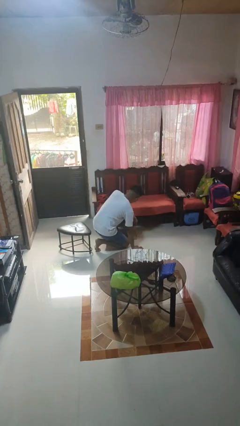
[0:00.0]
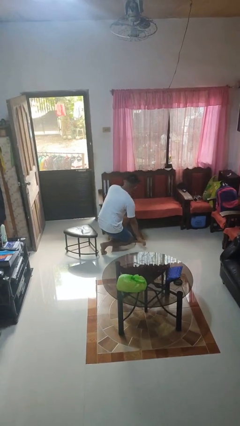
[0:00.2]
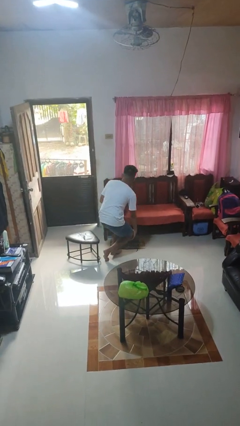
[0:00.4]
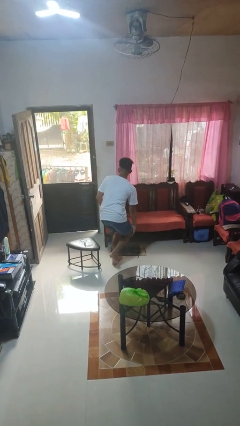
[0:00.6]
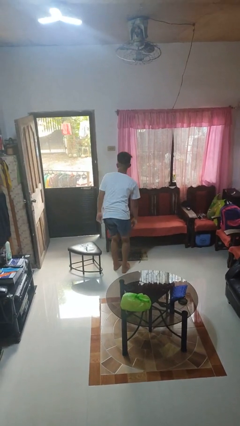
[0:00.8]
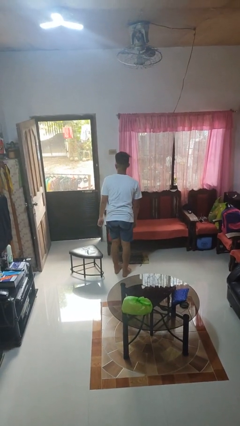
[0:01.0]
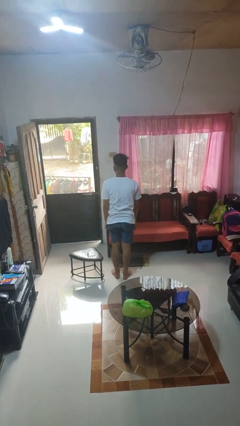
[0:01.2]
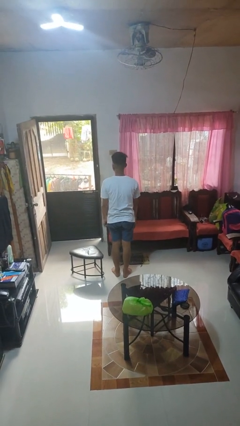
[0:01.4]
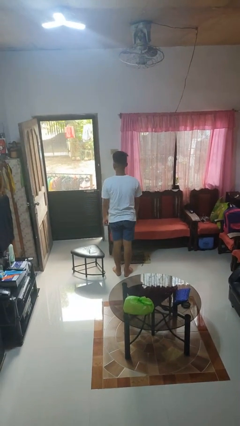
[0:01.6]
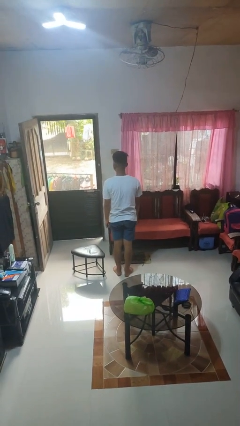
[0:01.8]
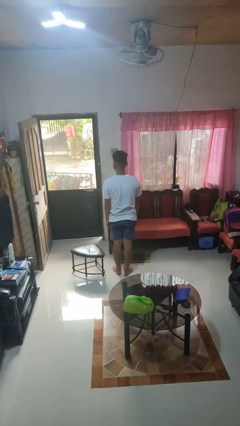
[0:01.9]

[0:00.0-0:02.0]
person stands up from floor

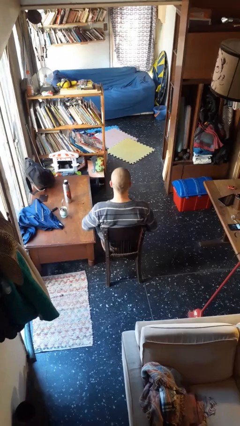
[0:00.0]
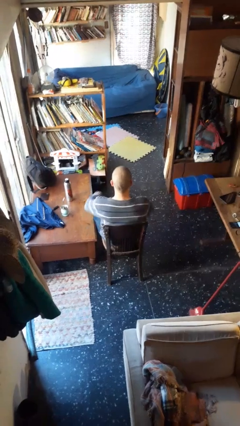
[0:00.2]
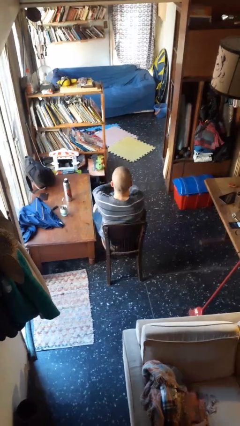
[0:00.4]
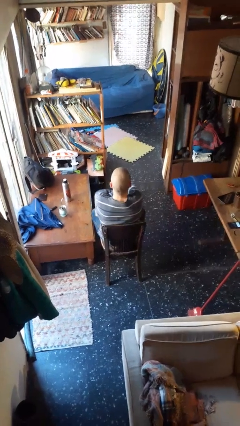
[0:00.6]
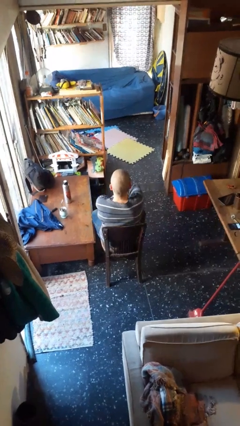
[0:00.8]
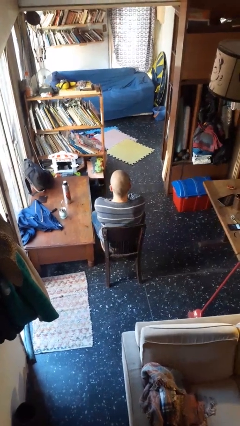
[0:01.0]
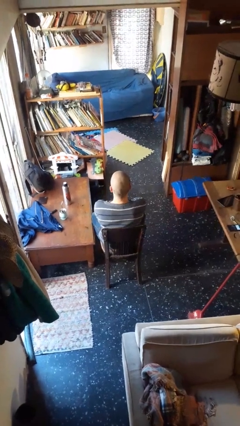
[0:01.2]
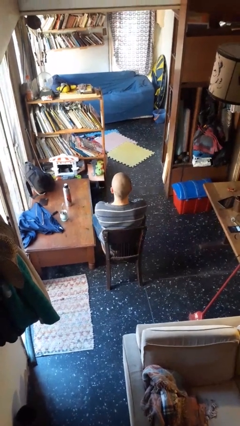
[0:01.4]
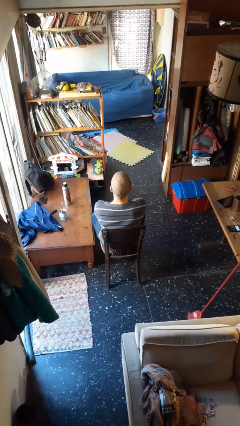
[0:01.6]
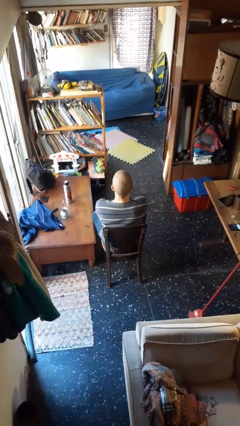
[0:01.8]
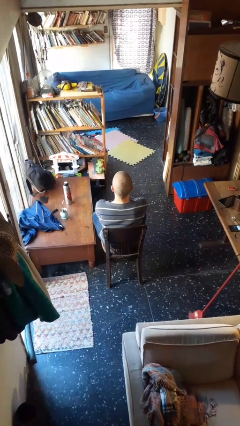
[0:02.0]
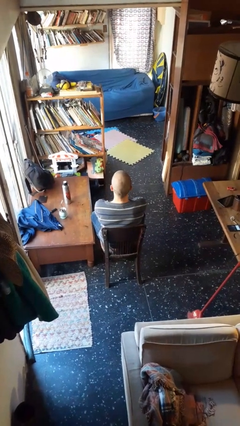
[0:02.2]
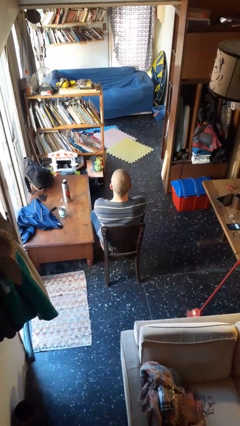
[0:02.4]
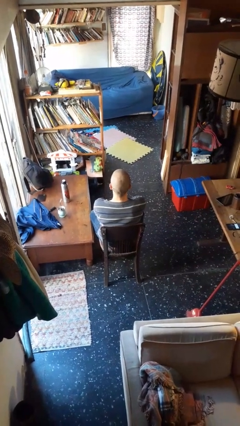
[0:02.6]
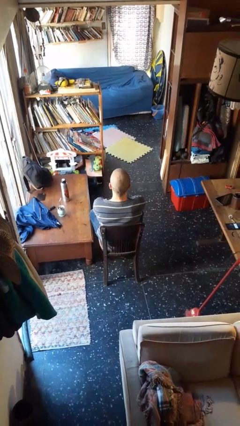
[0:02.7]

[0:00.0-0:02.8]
person crosses arms

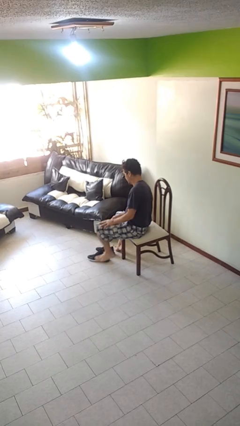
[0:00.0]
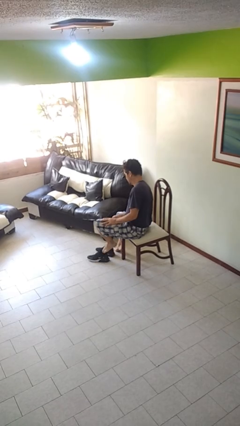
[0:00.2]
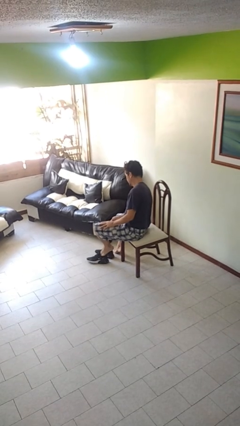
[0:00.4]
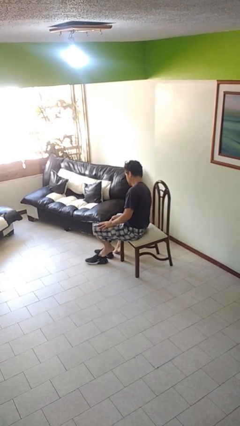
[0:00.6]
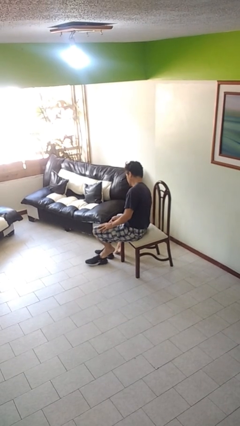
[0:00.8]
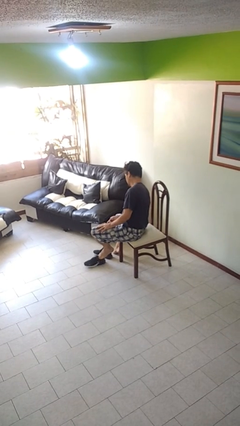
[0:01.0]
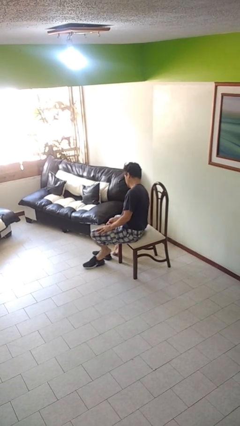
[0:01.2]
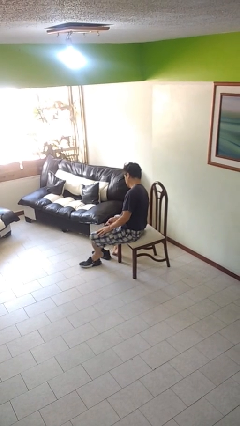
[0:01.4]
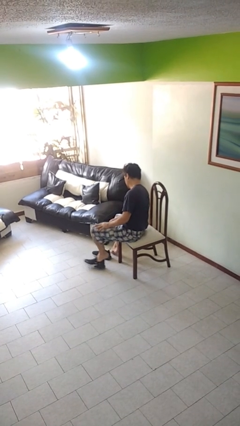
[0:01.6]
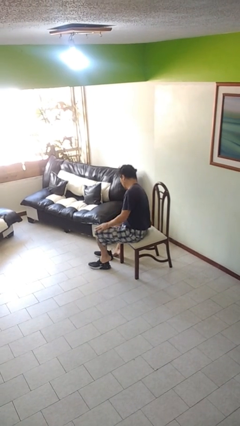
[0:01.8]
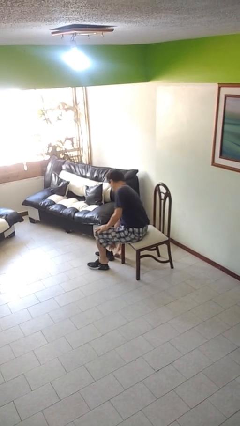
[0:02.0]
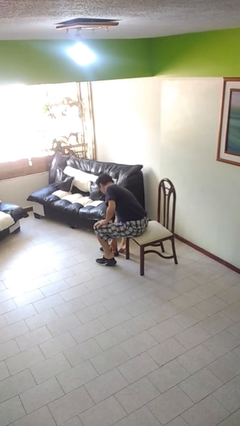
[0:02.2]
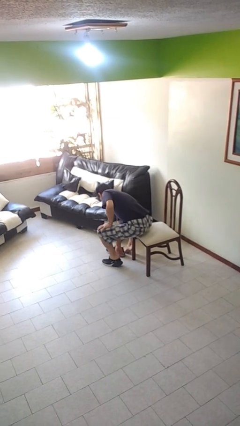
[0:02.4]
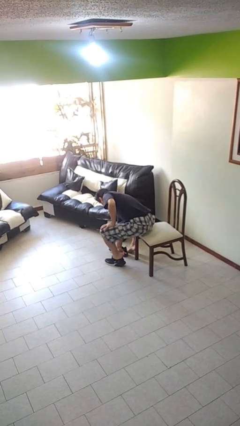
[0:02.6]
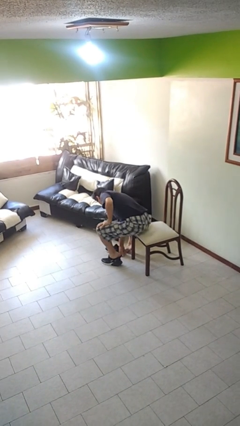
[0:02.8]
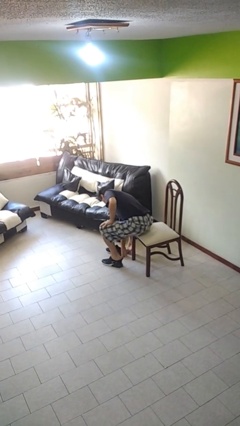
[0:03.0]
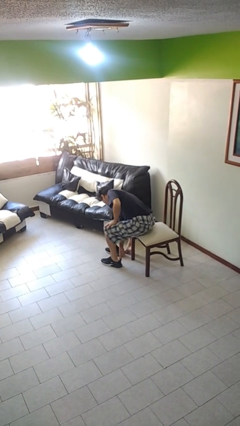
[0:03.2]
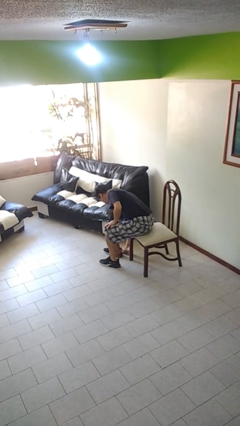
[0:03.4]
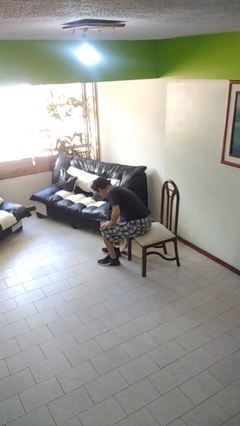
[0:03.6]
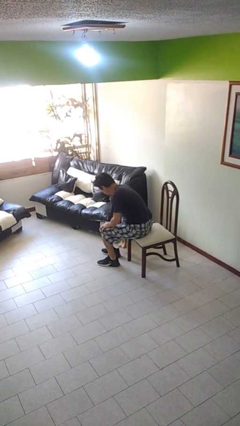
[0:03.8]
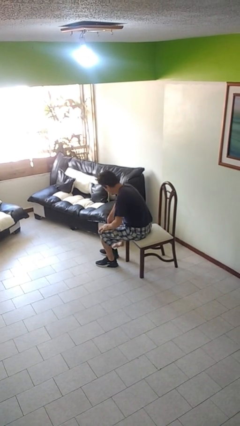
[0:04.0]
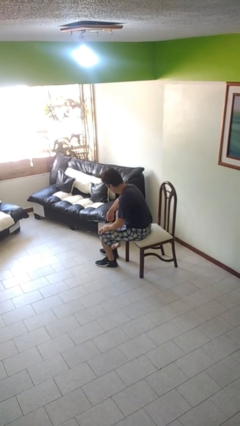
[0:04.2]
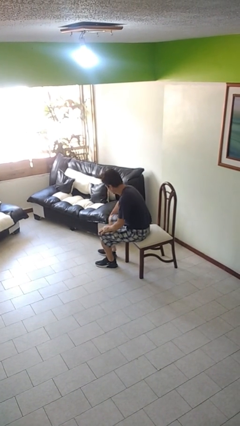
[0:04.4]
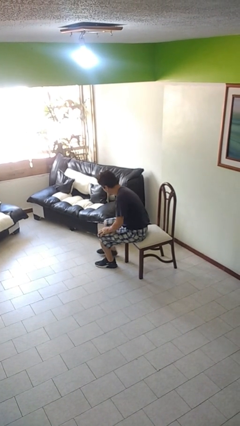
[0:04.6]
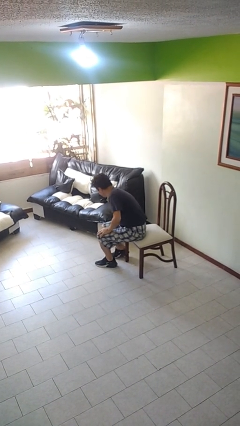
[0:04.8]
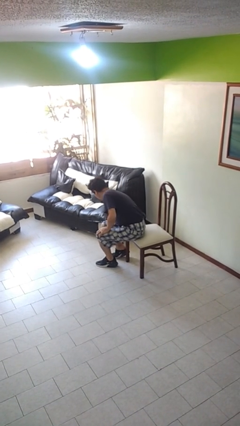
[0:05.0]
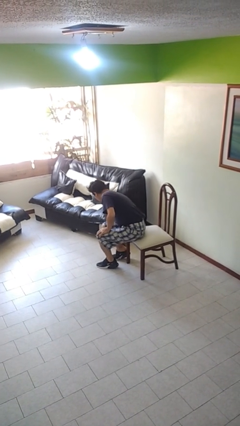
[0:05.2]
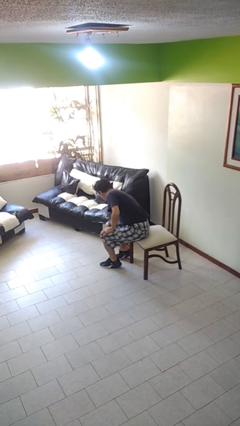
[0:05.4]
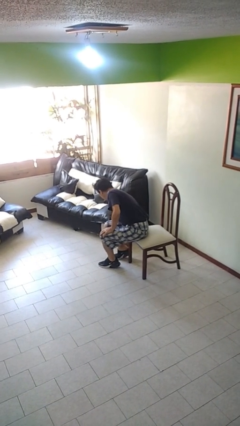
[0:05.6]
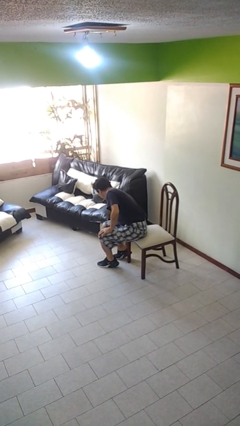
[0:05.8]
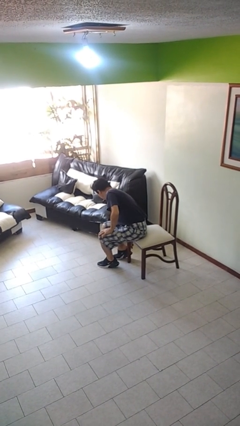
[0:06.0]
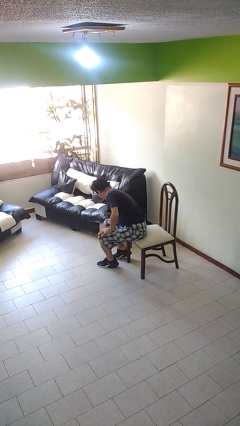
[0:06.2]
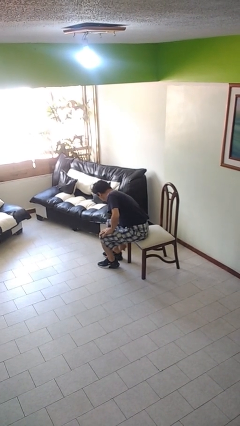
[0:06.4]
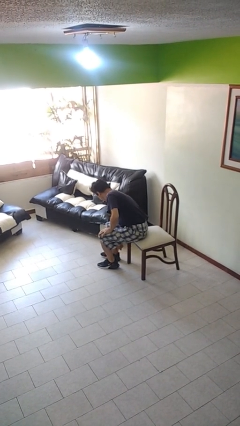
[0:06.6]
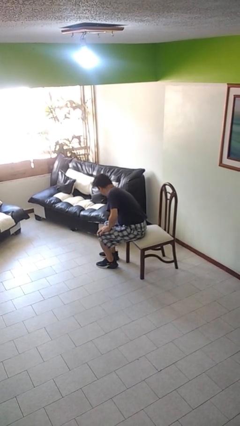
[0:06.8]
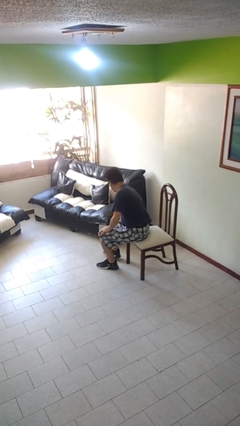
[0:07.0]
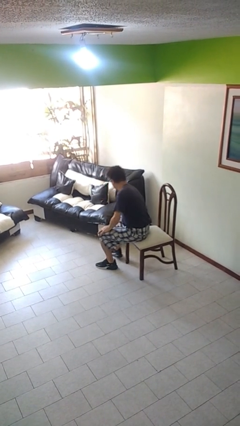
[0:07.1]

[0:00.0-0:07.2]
person puts on shoes

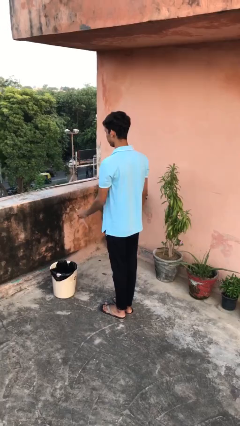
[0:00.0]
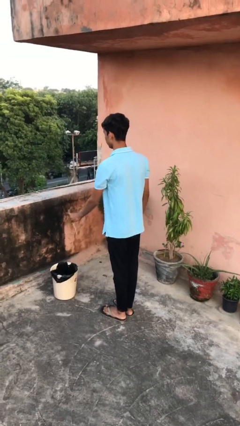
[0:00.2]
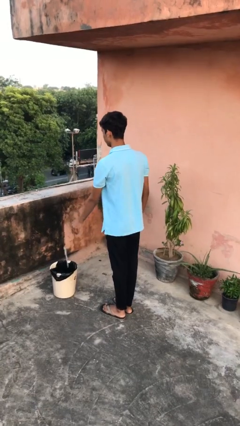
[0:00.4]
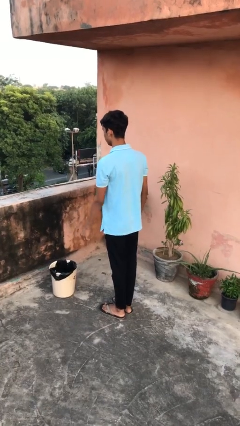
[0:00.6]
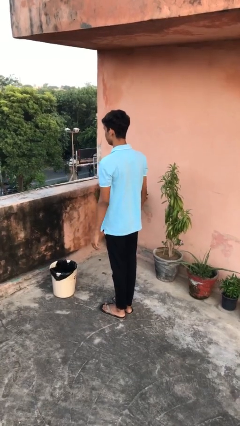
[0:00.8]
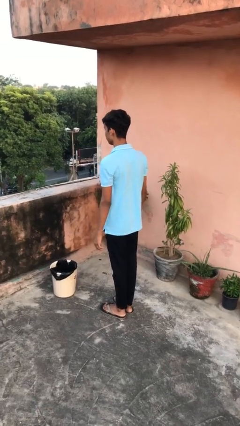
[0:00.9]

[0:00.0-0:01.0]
person discards trash

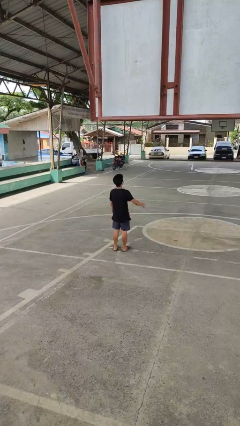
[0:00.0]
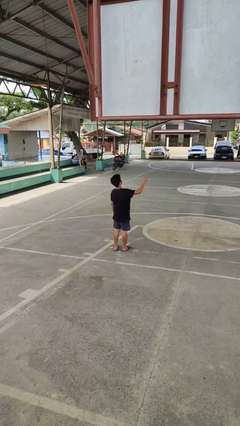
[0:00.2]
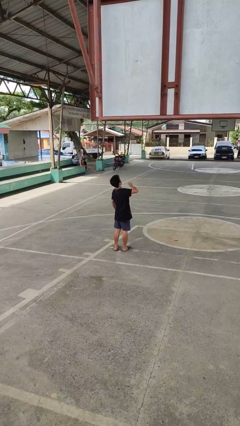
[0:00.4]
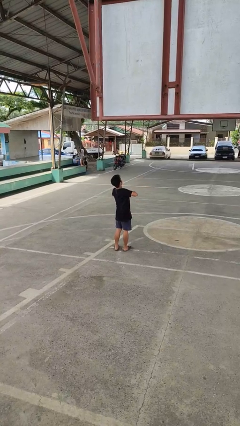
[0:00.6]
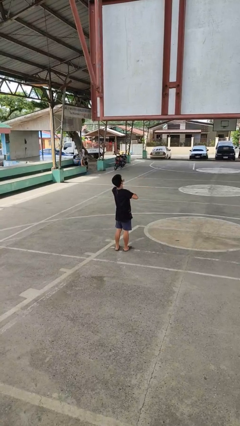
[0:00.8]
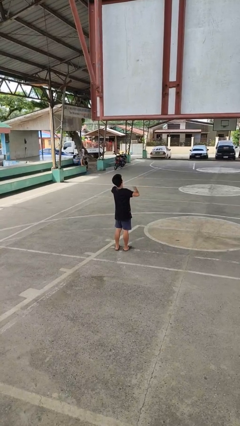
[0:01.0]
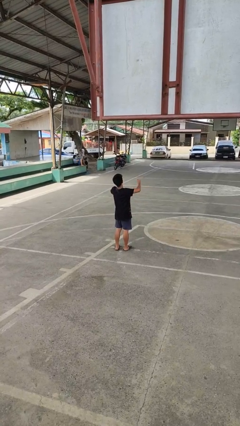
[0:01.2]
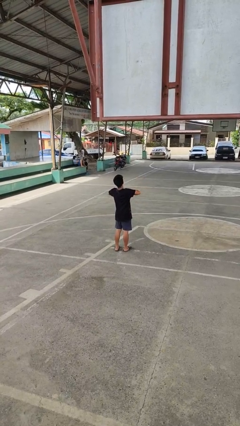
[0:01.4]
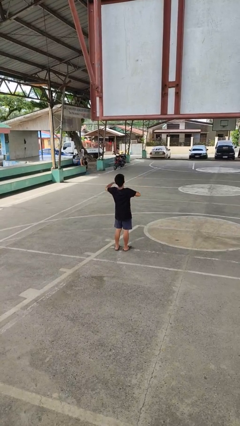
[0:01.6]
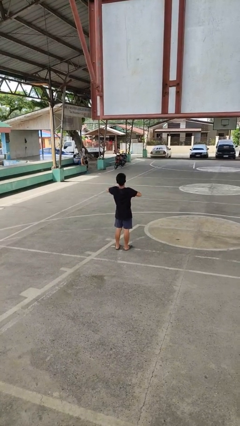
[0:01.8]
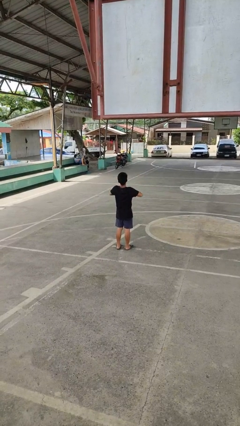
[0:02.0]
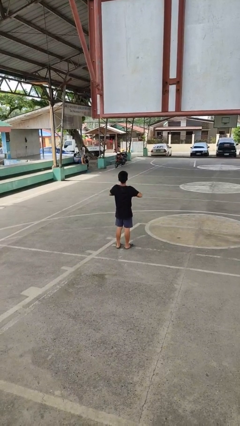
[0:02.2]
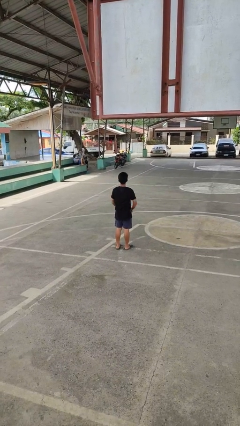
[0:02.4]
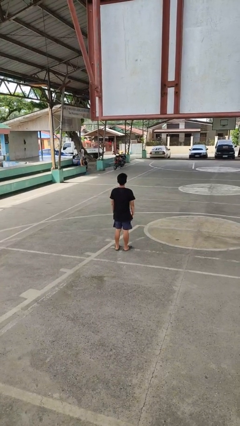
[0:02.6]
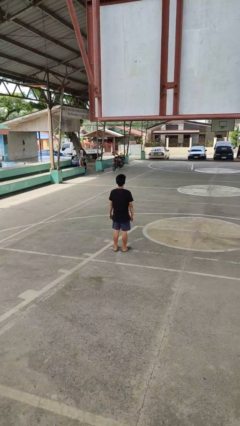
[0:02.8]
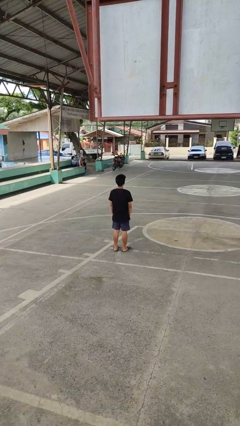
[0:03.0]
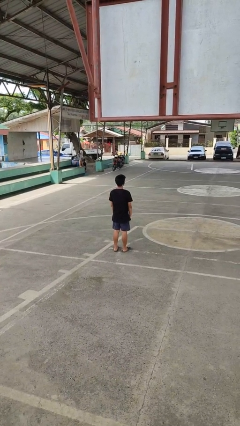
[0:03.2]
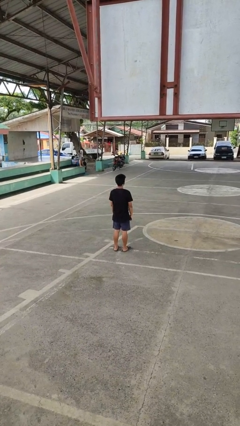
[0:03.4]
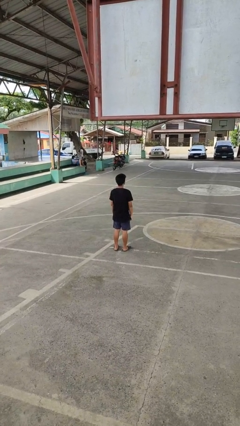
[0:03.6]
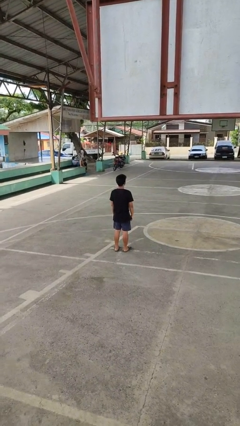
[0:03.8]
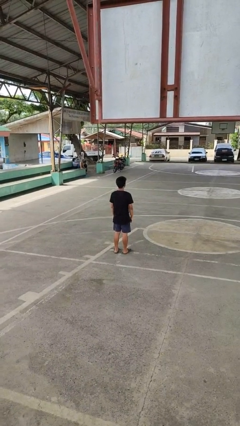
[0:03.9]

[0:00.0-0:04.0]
person drums on chest

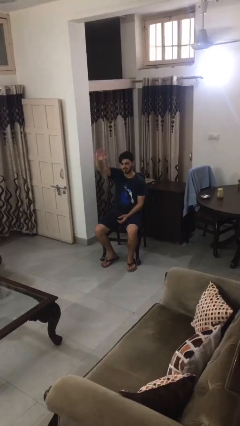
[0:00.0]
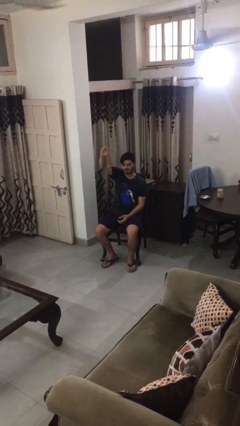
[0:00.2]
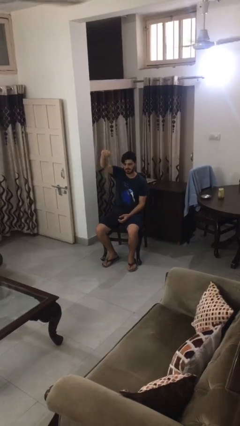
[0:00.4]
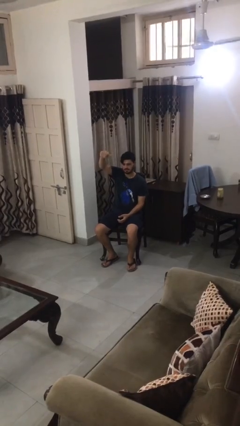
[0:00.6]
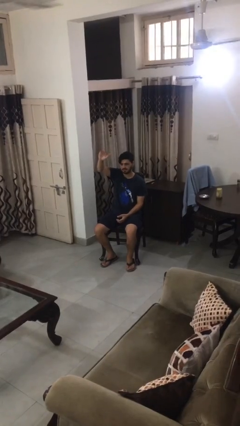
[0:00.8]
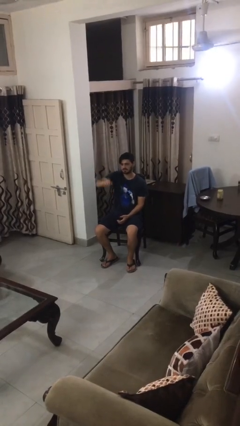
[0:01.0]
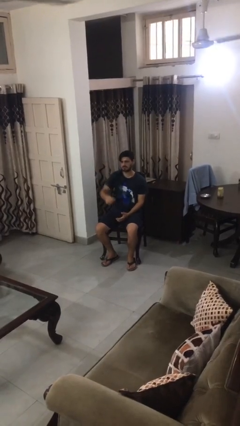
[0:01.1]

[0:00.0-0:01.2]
person gestures come here
